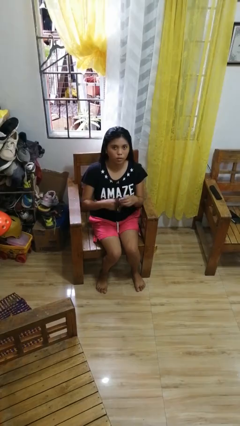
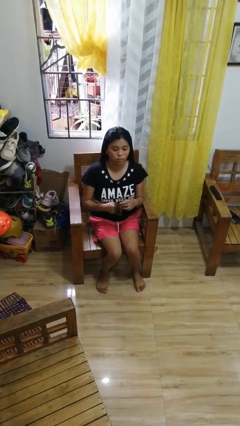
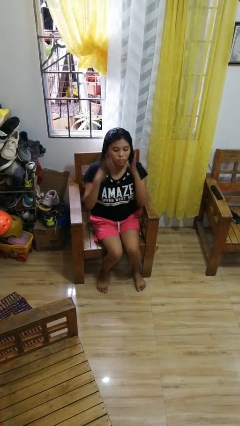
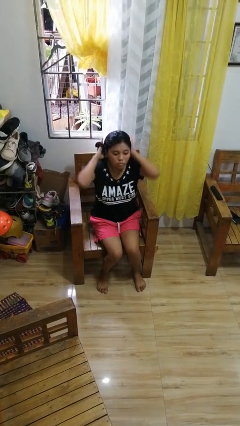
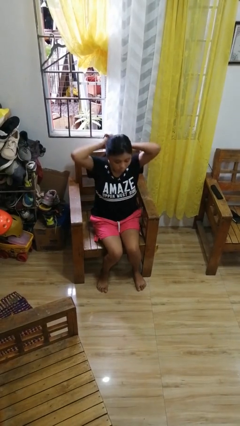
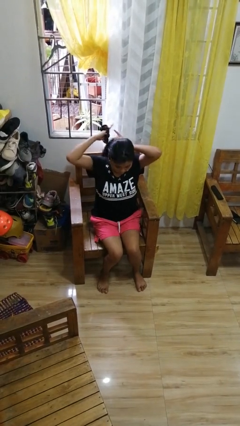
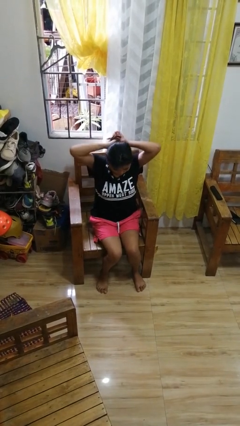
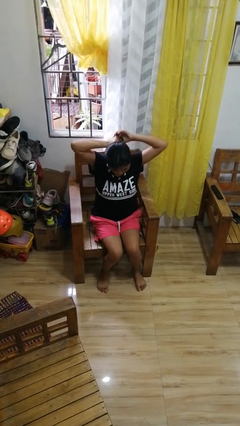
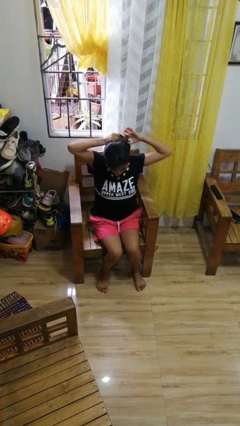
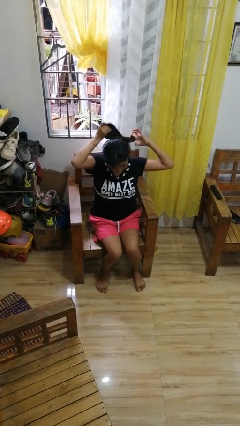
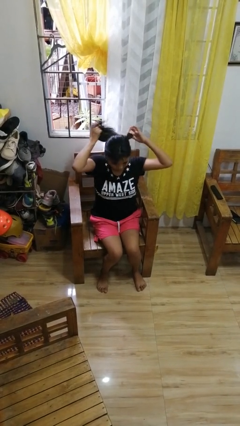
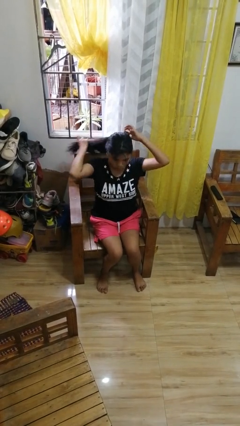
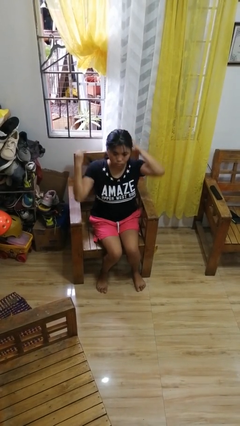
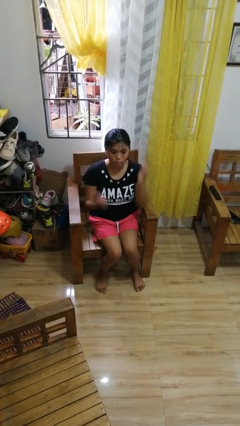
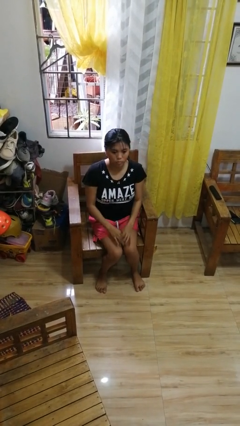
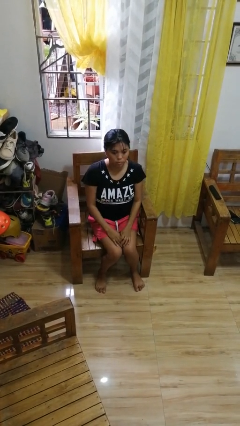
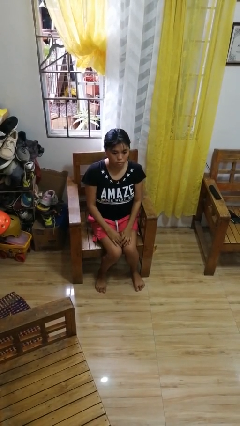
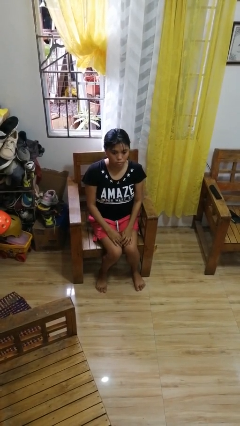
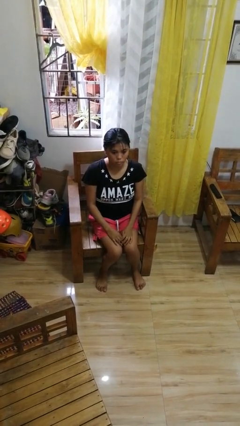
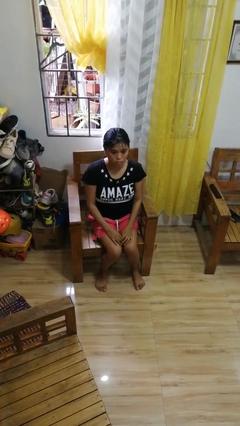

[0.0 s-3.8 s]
person puts hair in ponytail

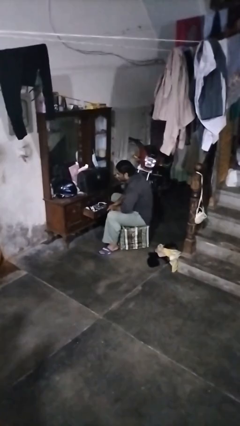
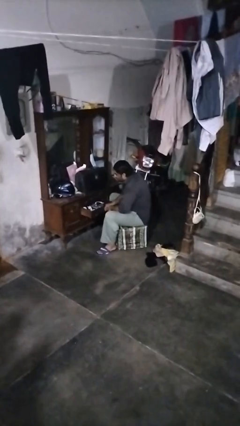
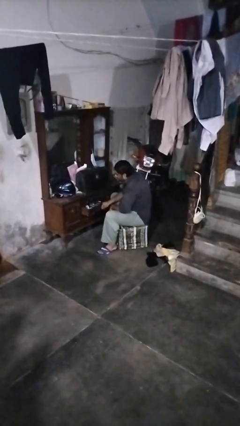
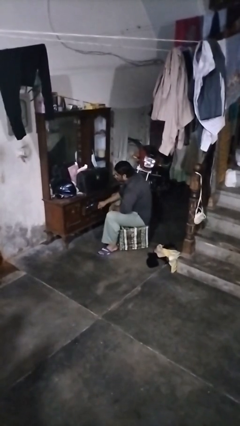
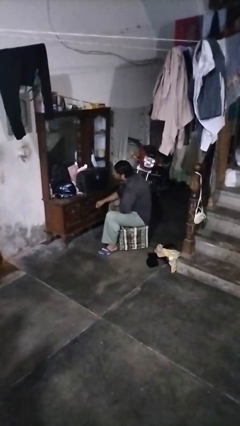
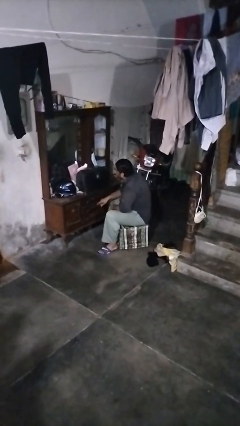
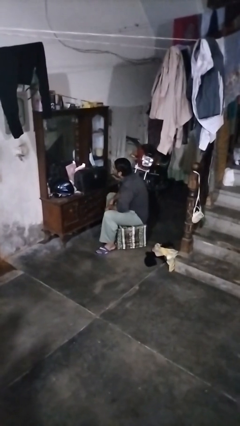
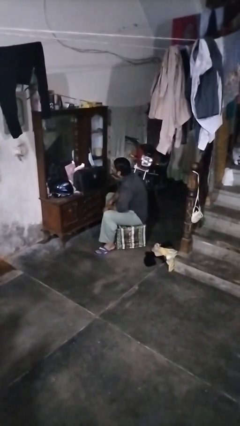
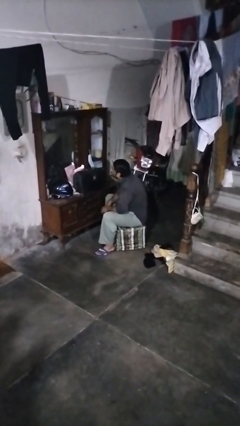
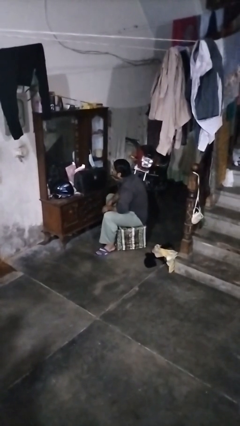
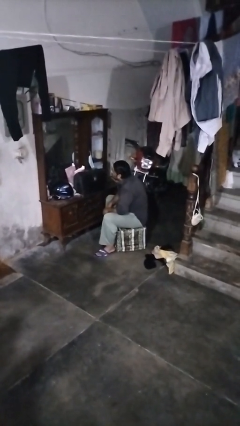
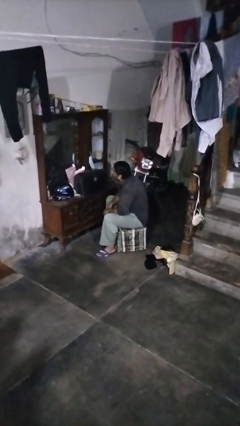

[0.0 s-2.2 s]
person closes dresser drawer

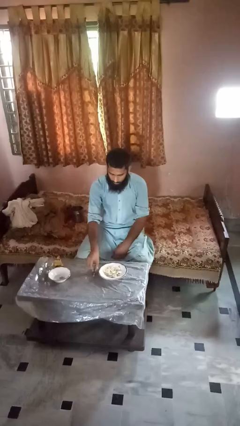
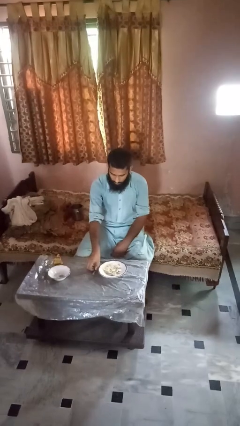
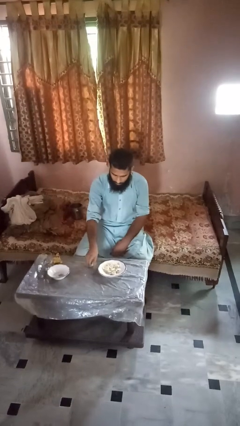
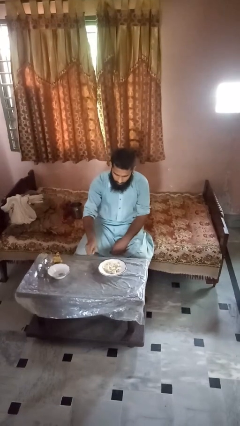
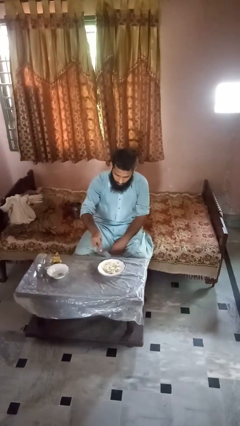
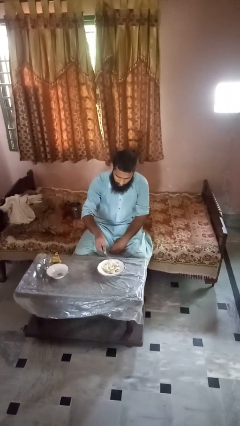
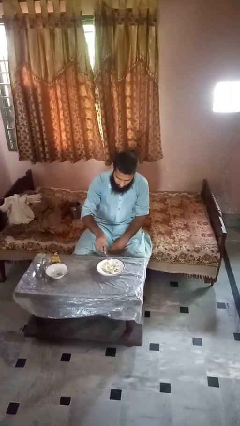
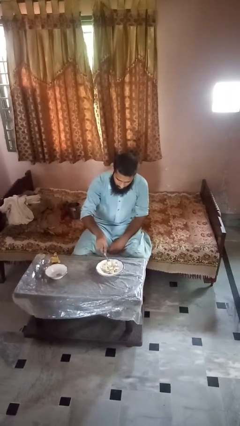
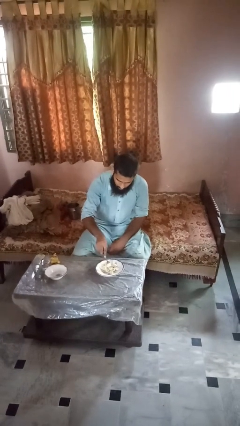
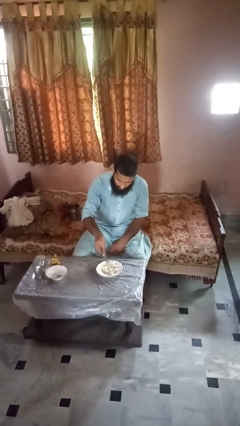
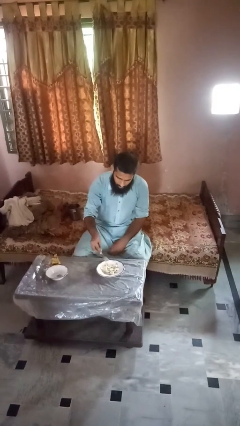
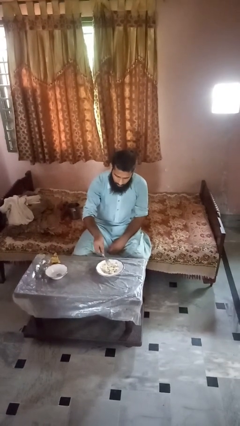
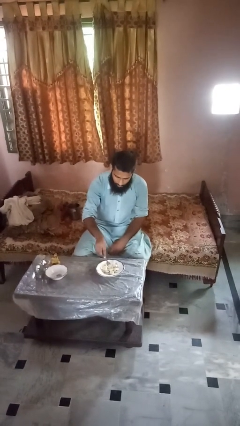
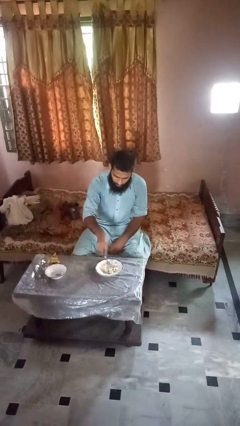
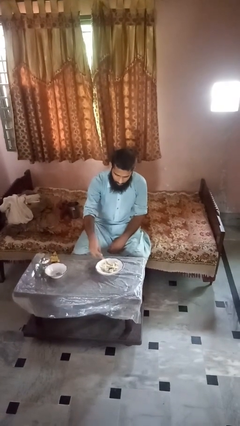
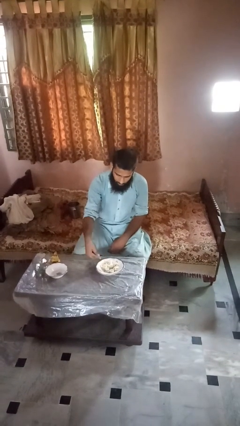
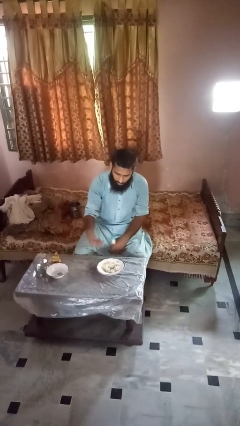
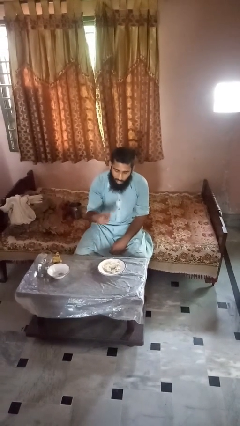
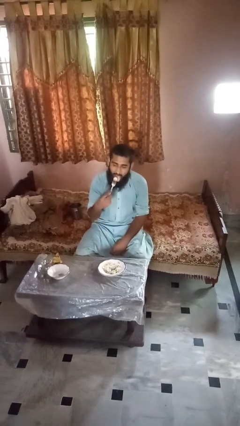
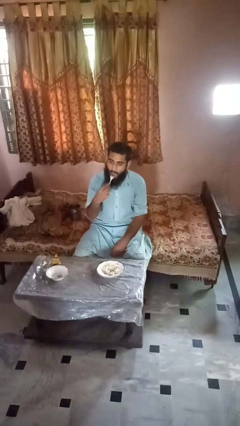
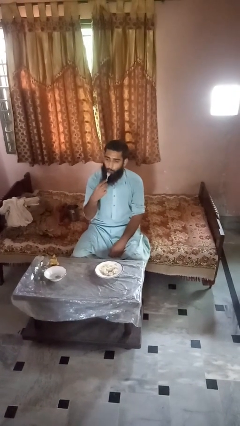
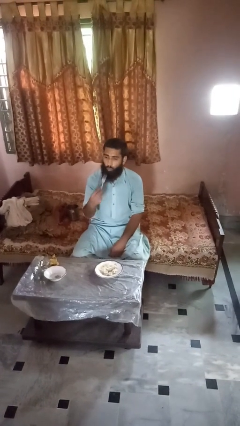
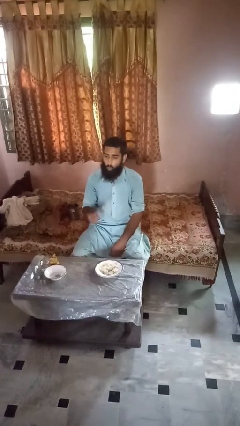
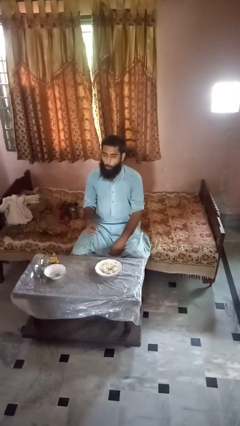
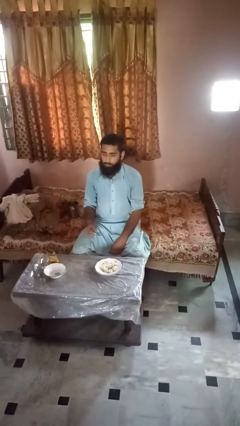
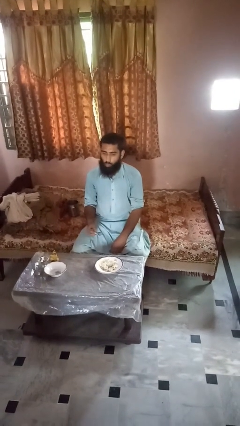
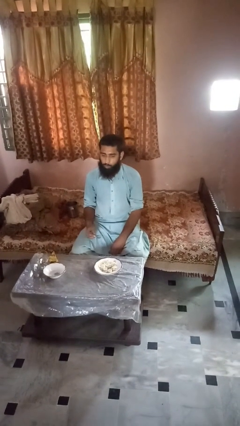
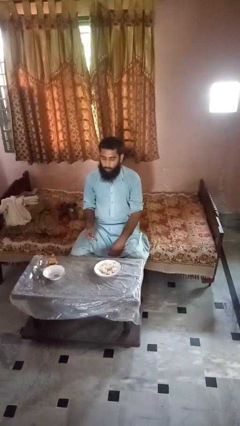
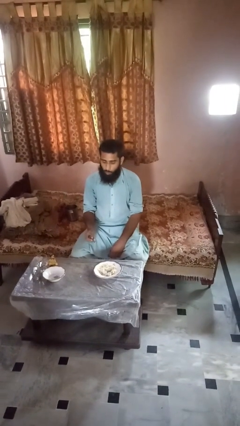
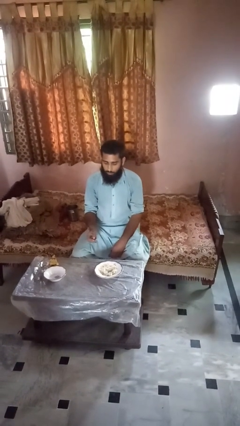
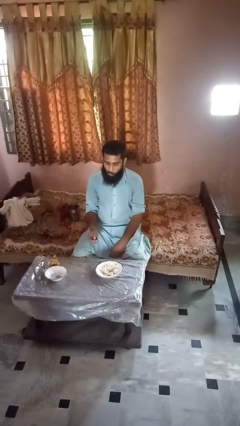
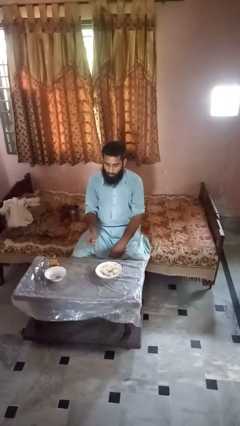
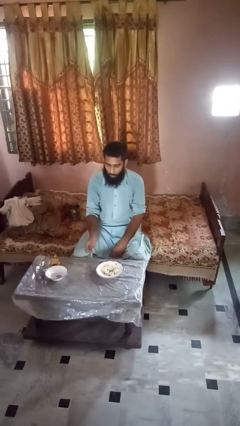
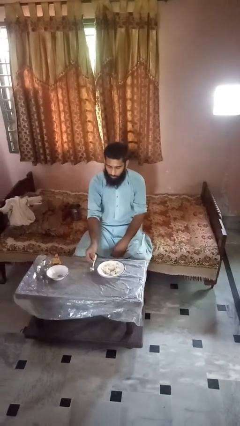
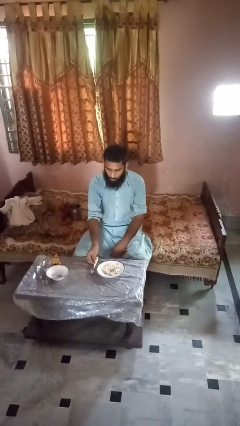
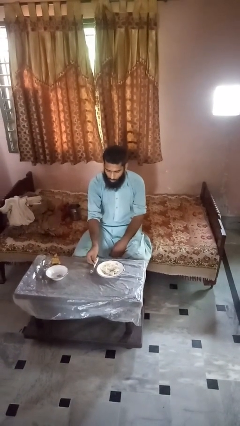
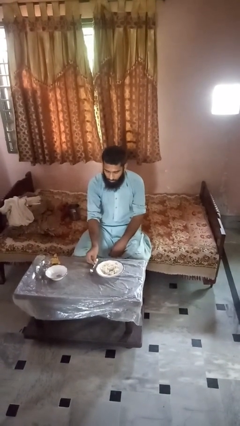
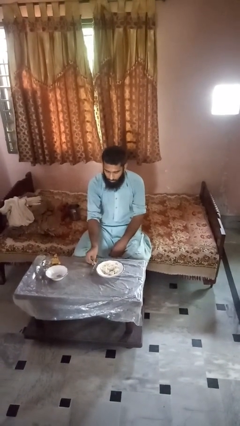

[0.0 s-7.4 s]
person eats with utensil

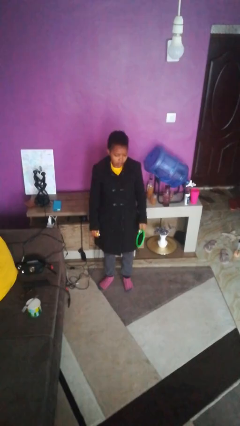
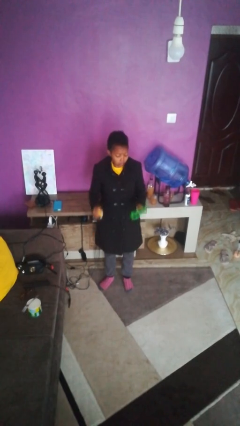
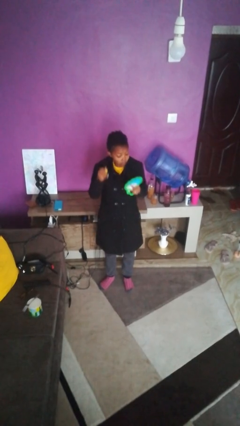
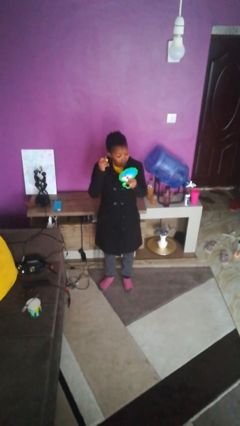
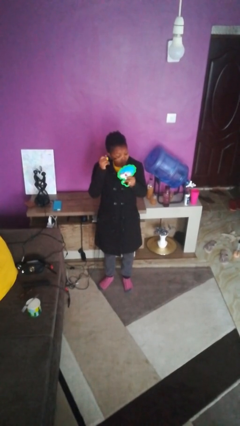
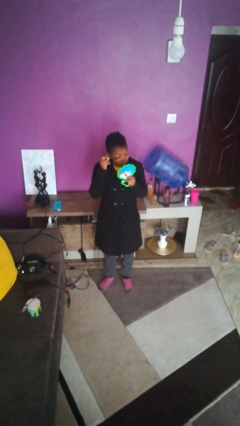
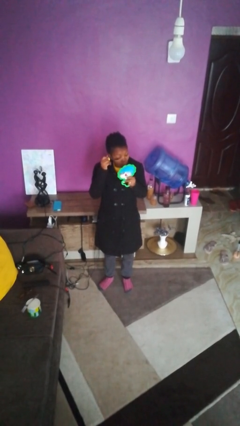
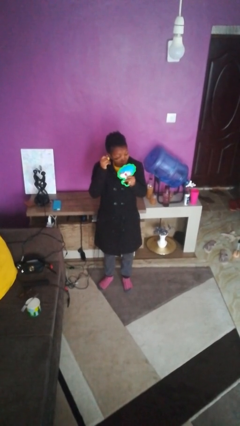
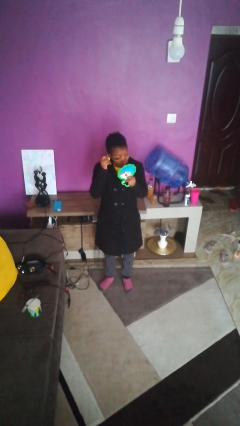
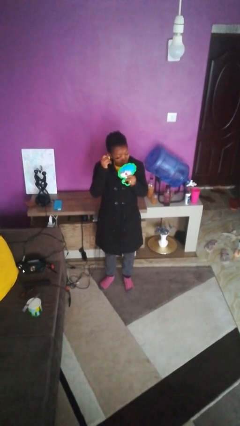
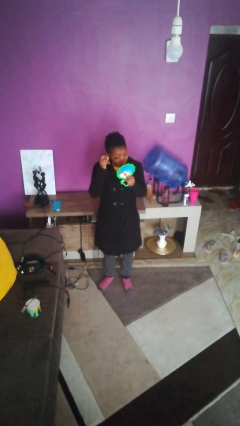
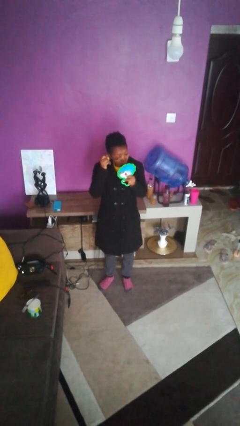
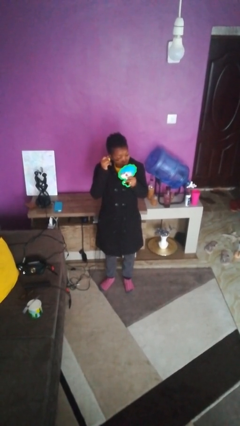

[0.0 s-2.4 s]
person applies eye makeup

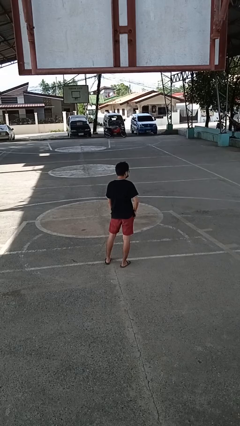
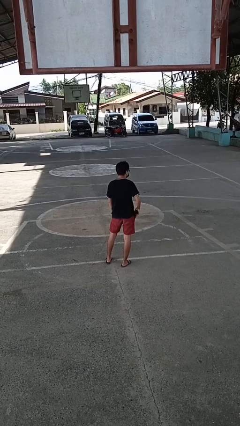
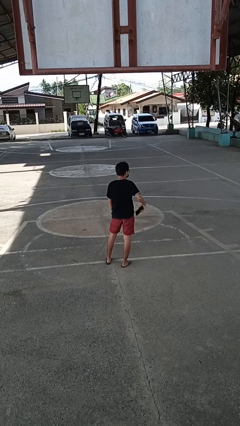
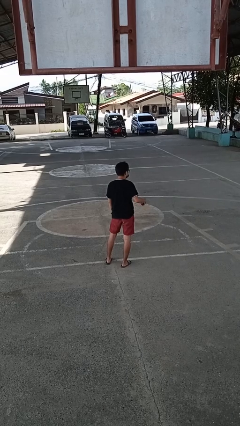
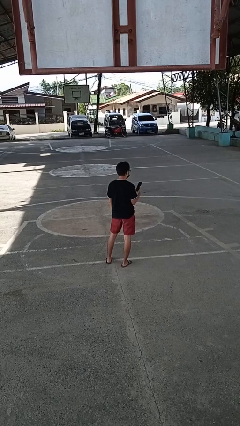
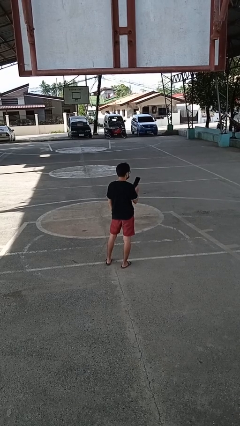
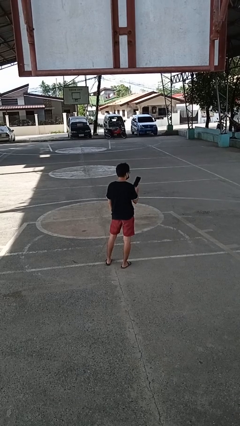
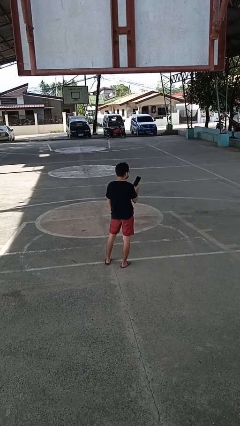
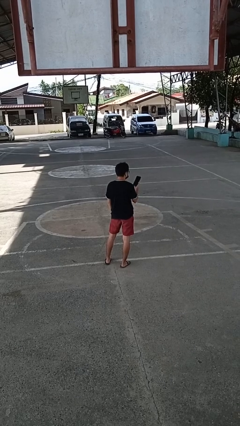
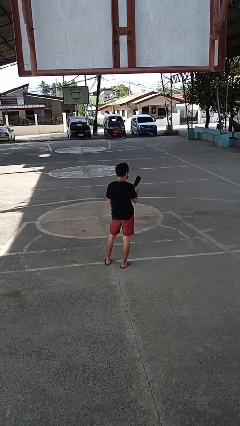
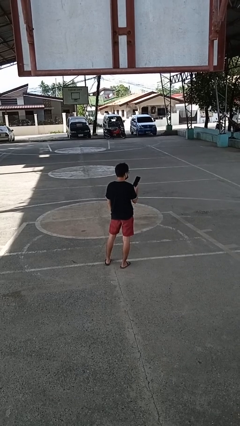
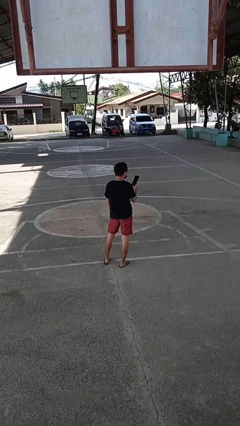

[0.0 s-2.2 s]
person takes phone from pocket
